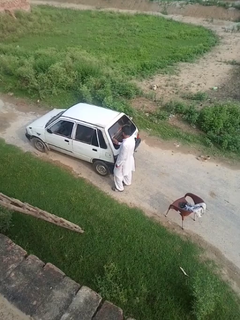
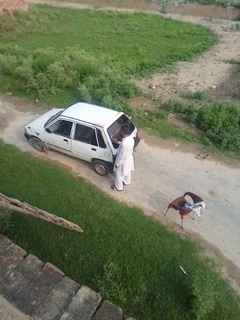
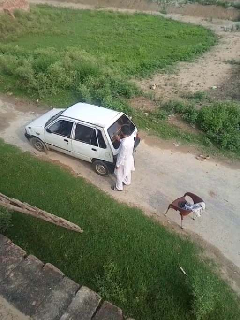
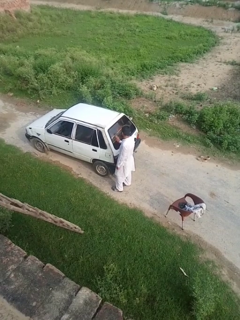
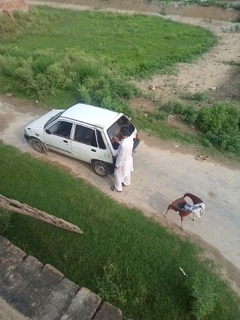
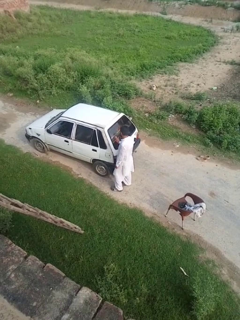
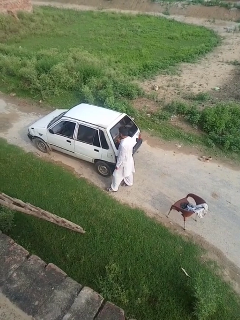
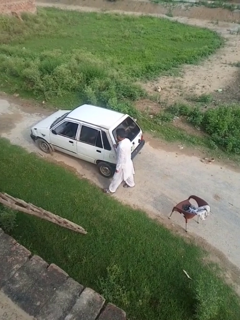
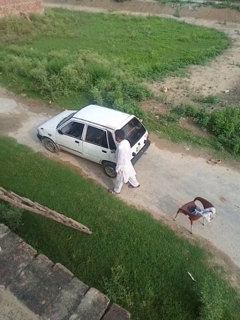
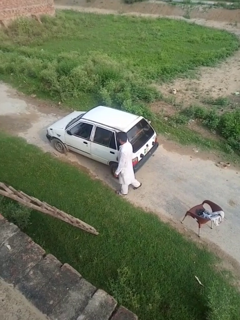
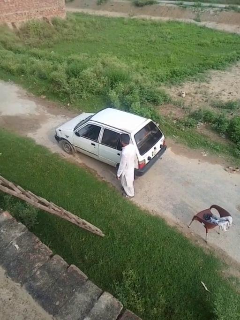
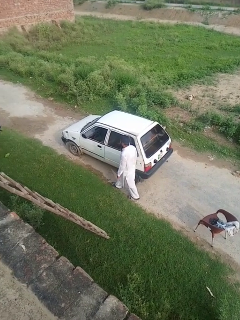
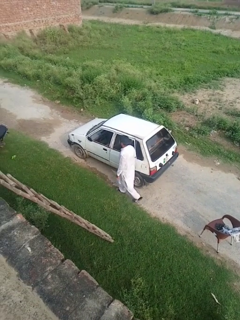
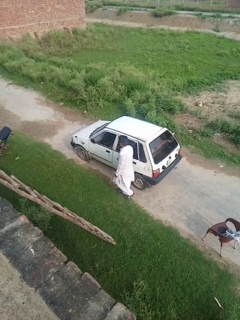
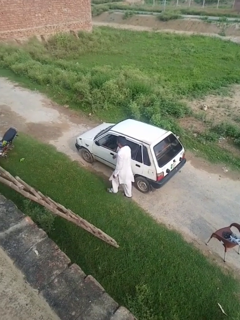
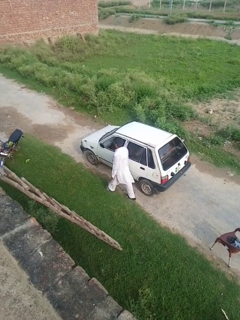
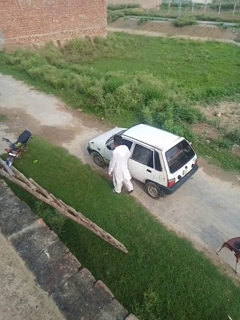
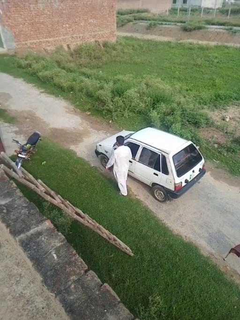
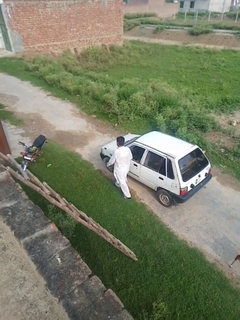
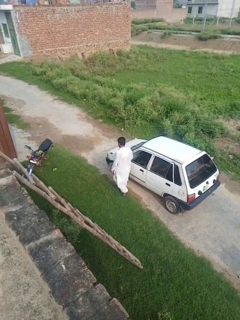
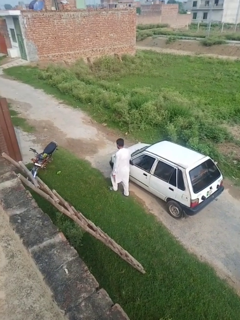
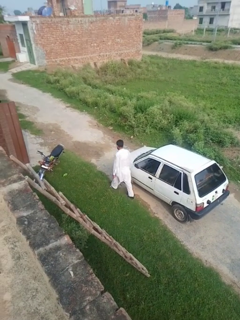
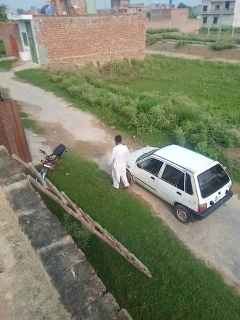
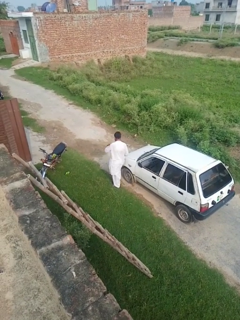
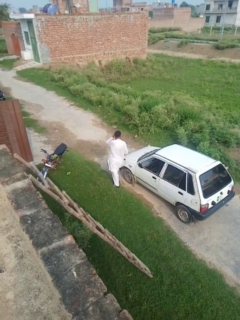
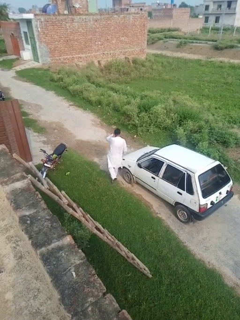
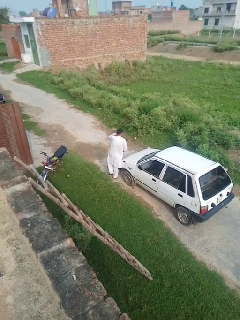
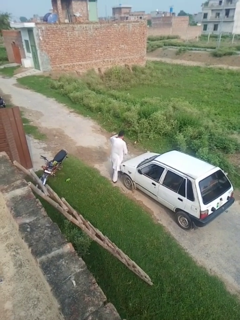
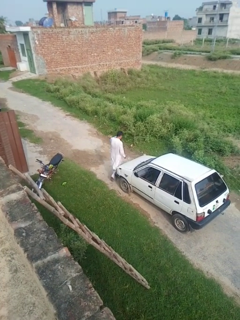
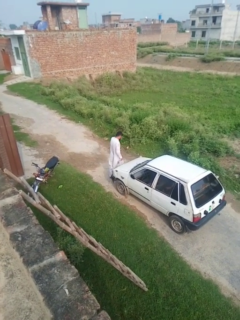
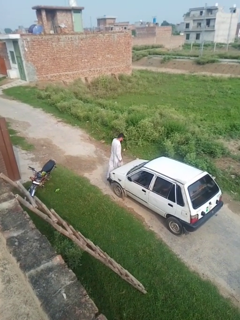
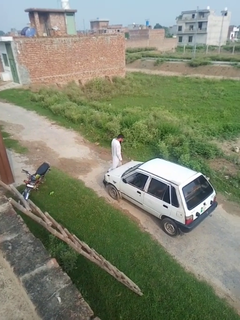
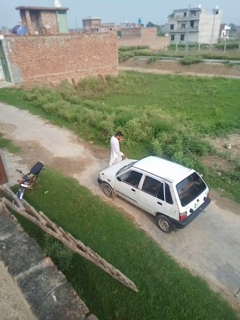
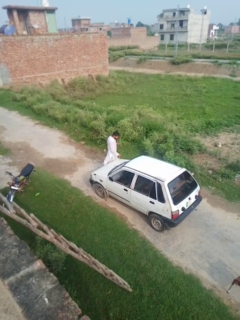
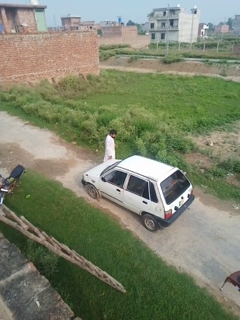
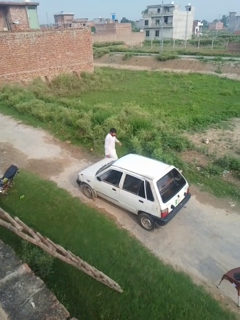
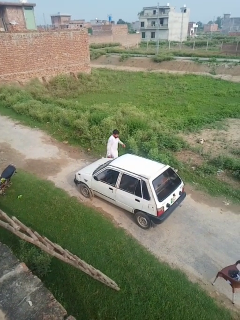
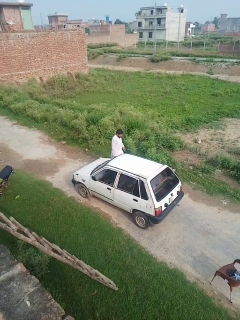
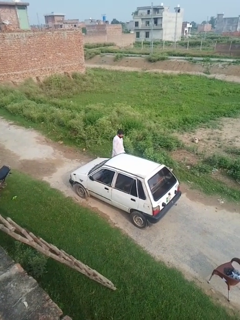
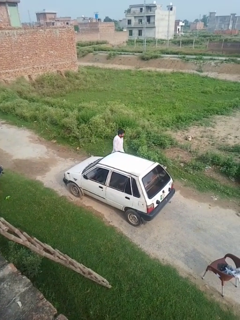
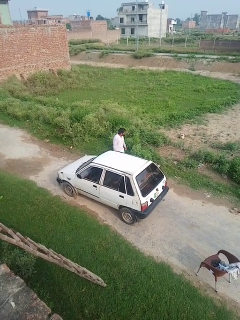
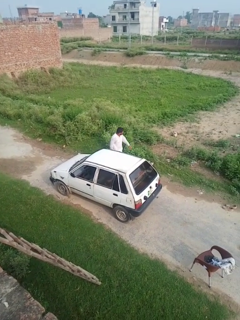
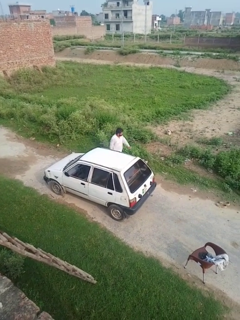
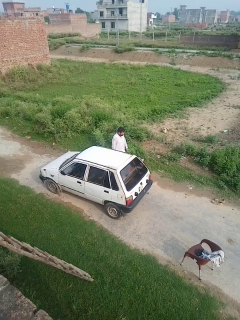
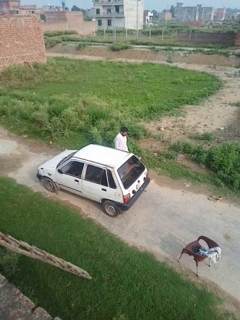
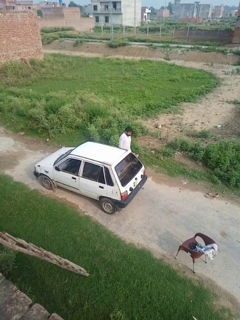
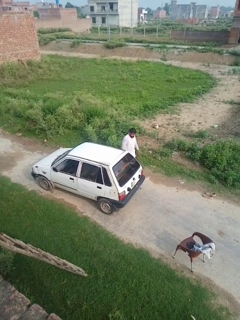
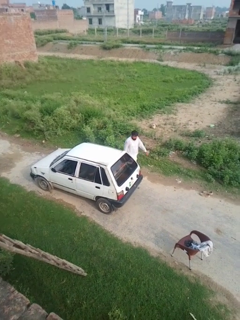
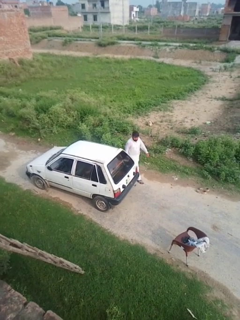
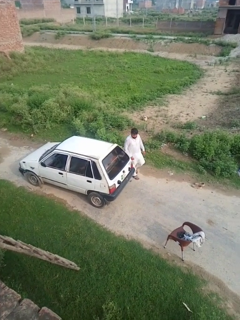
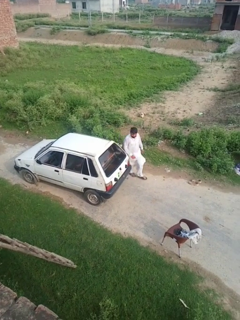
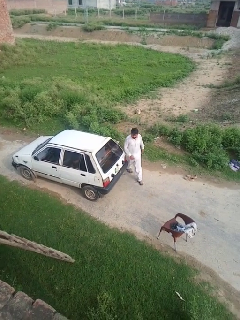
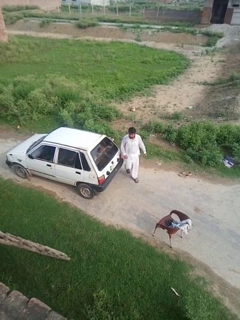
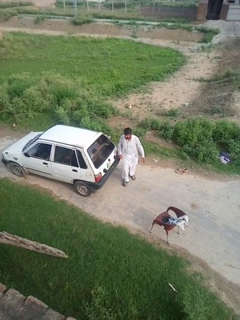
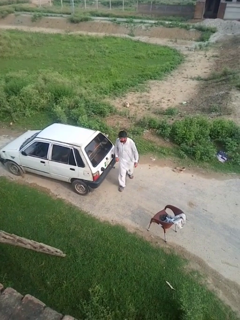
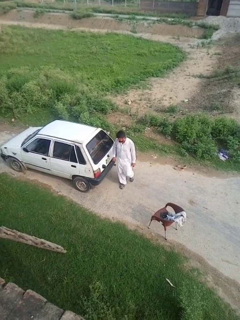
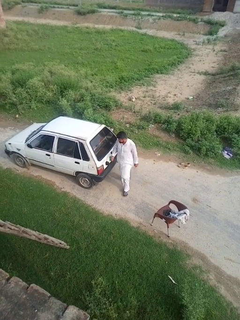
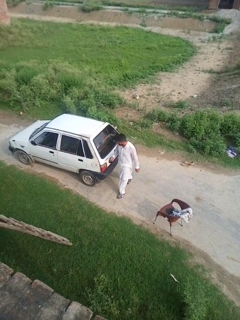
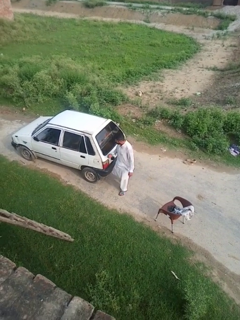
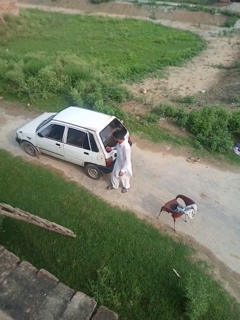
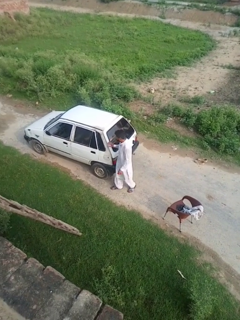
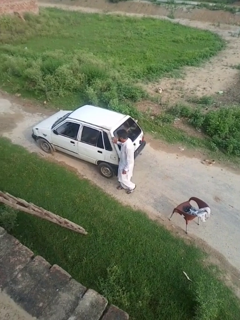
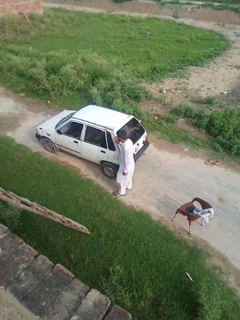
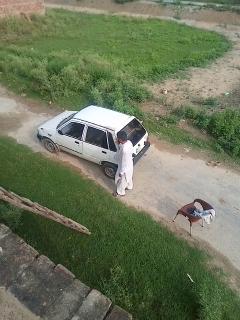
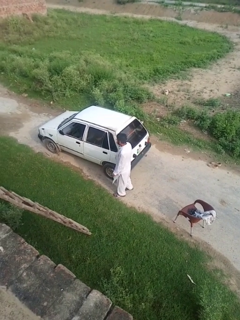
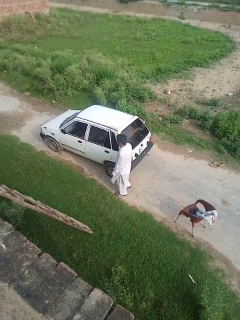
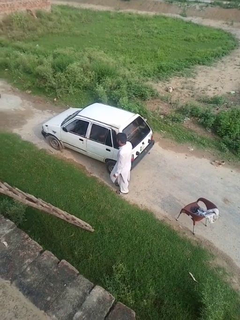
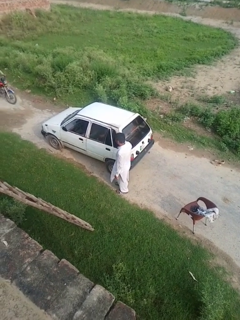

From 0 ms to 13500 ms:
person walks around car

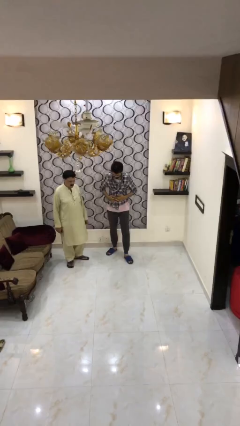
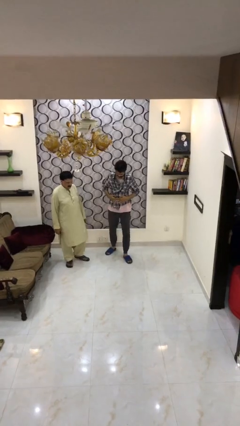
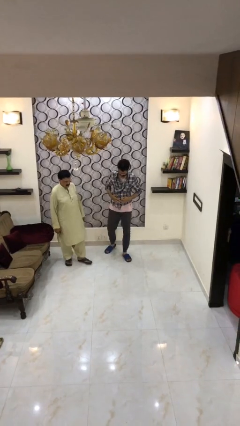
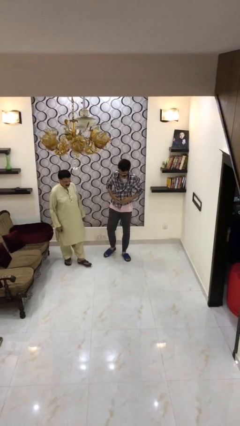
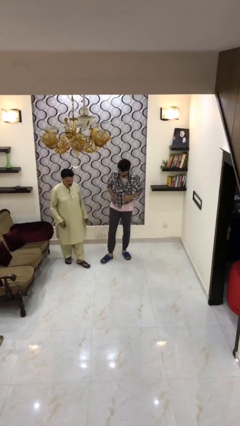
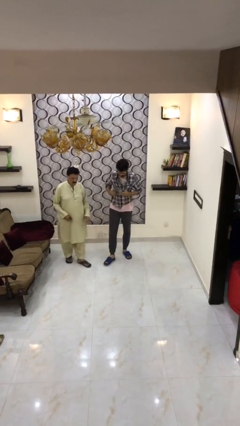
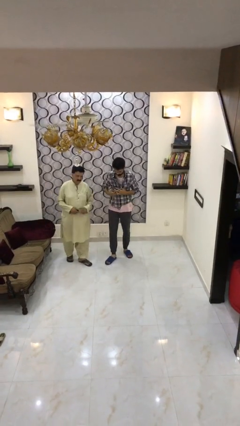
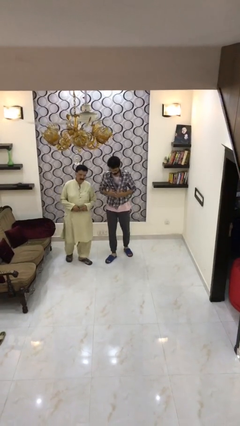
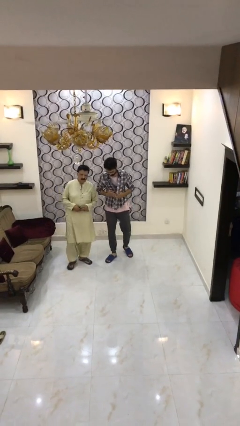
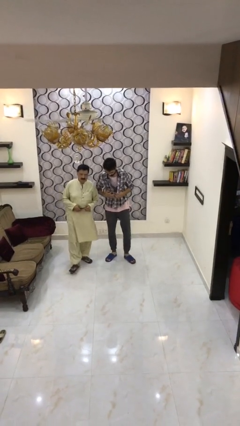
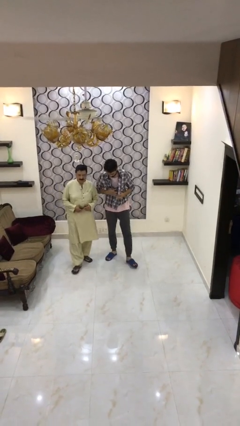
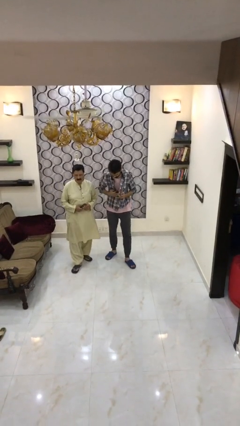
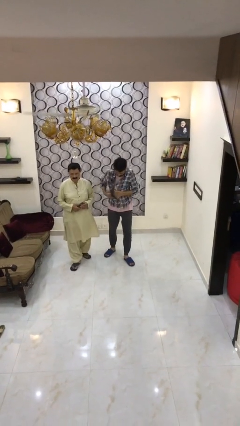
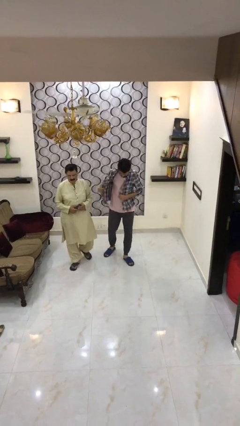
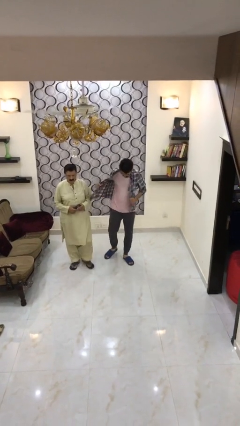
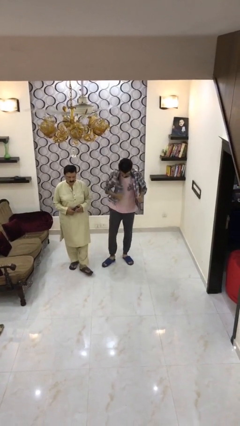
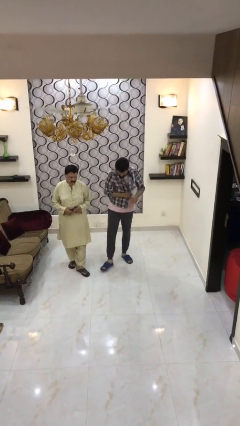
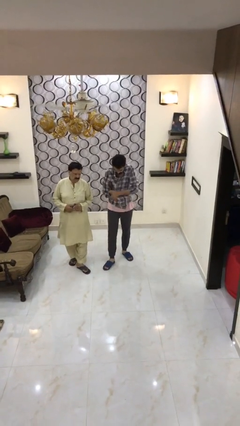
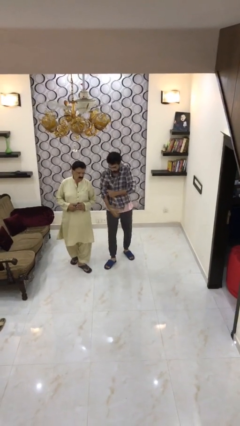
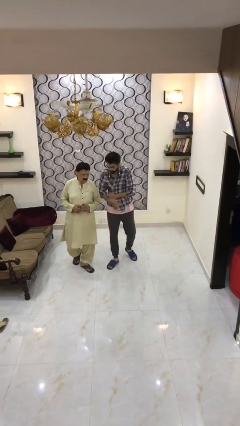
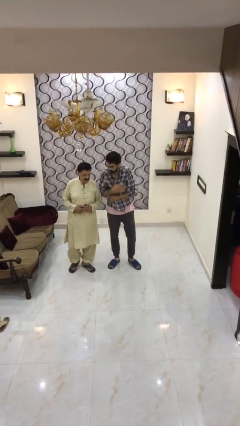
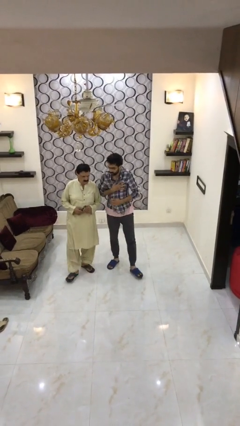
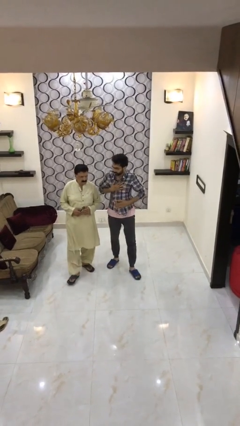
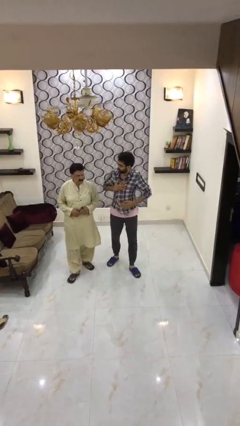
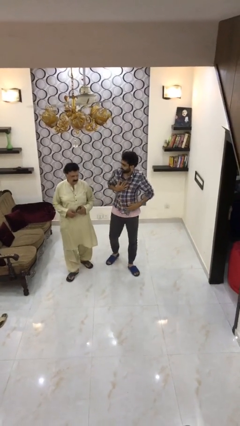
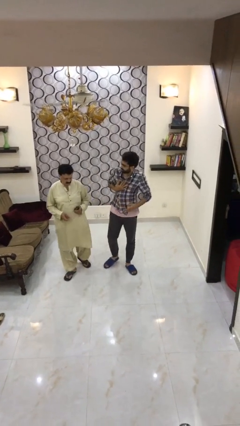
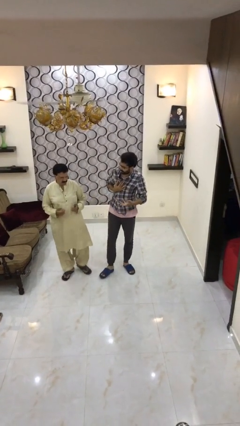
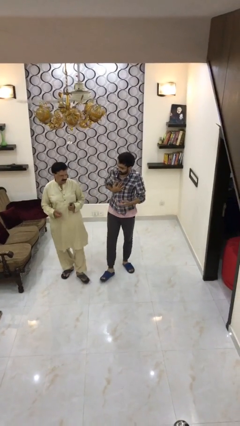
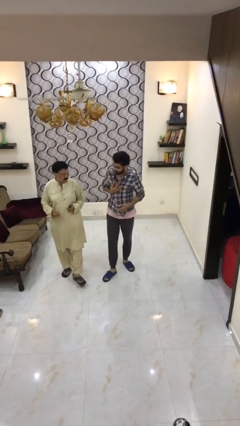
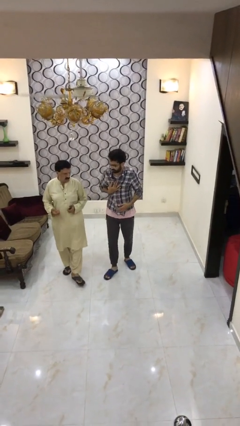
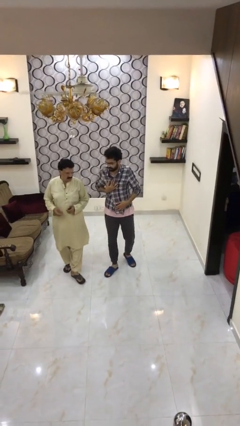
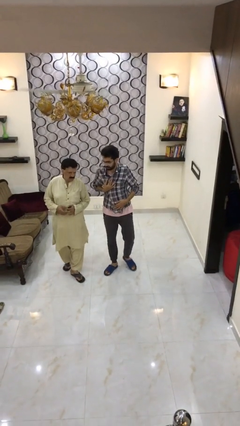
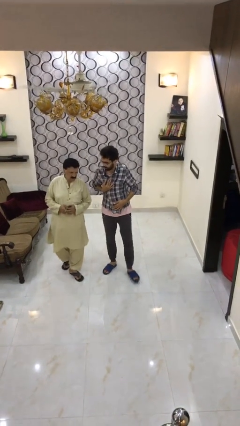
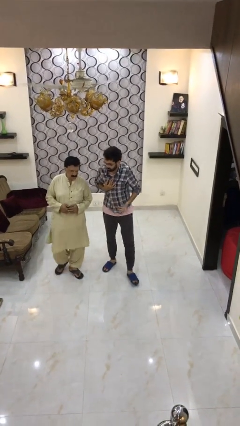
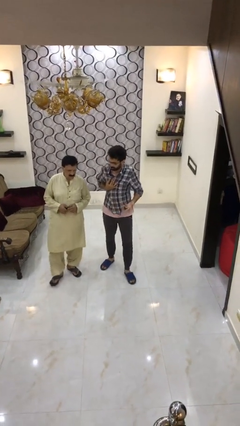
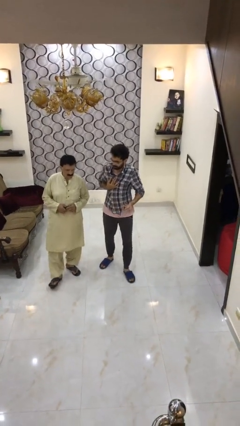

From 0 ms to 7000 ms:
person talks to person

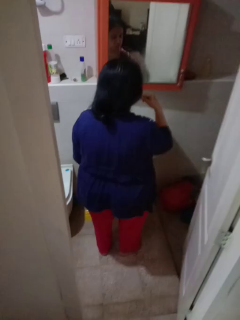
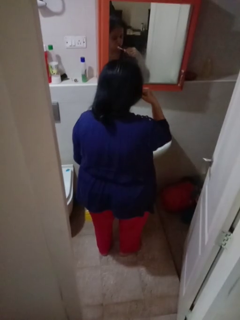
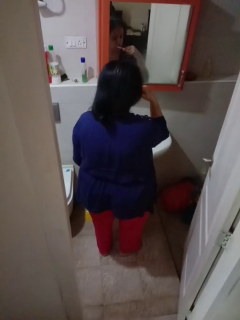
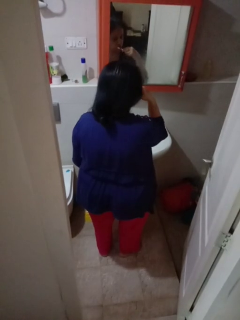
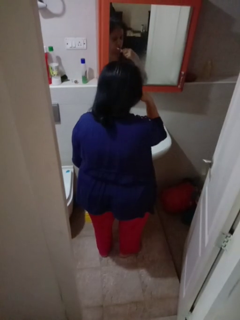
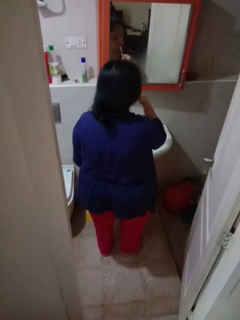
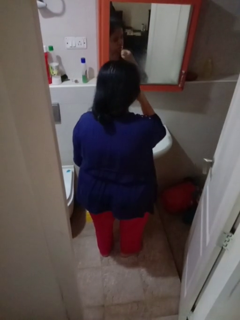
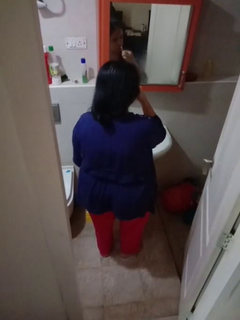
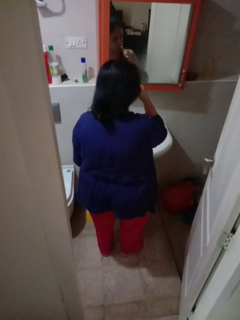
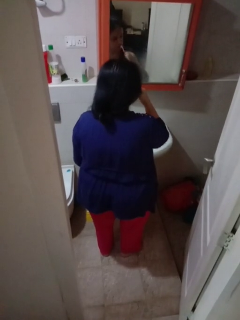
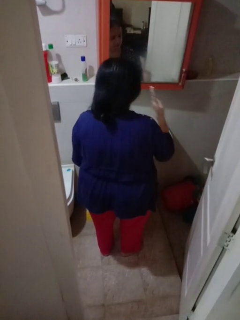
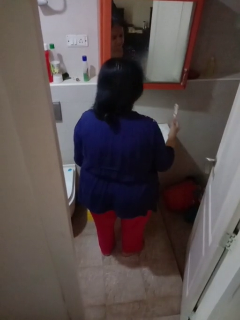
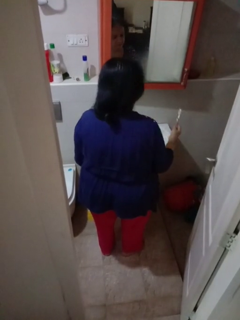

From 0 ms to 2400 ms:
person brushes teeth
